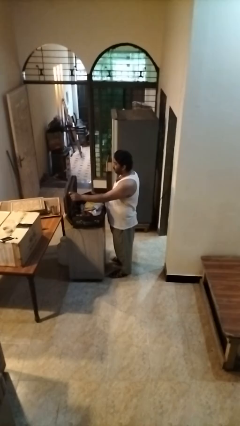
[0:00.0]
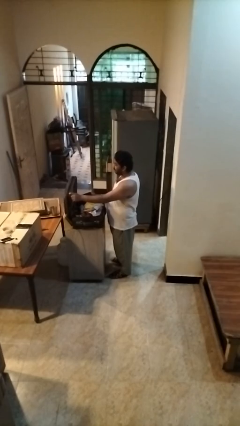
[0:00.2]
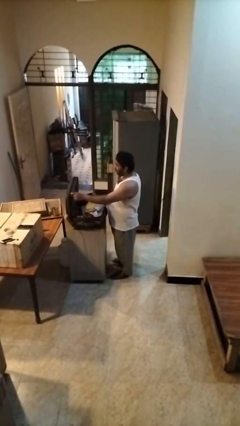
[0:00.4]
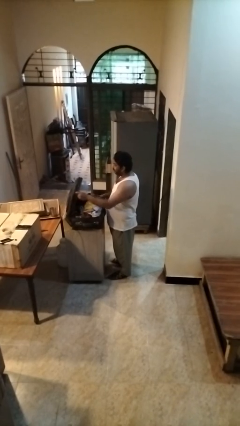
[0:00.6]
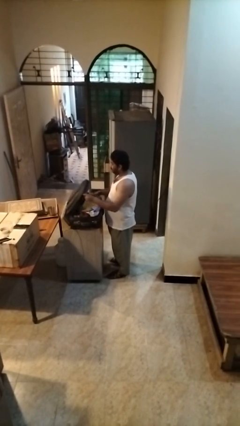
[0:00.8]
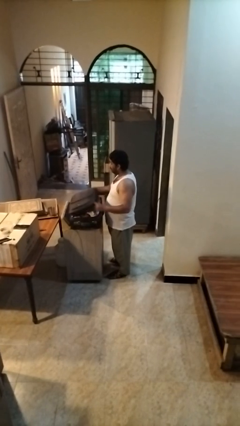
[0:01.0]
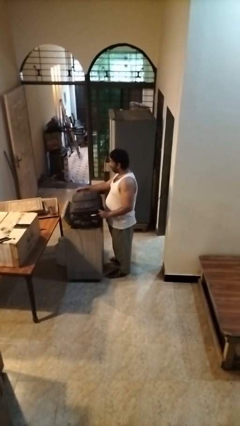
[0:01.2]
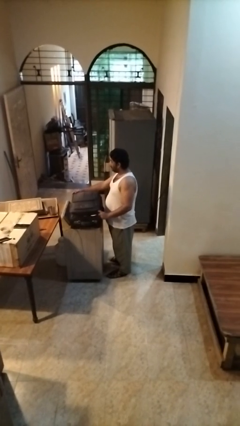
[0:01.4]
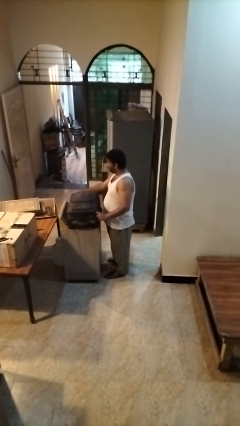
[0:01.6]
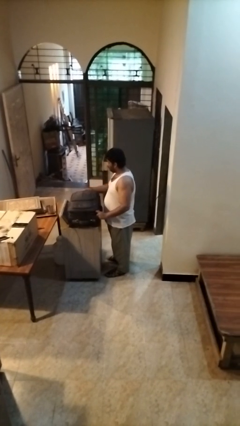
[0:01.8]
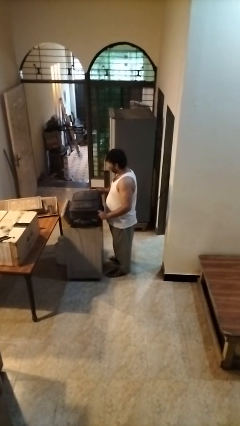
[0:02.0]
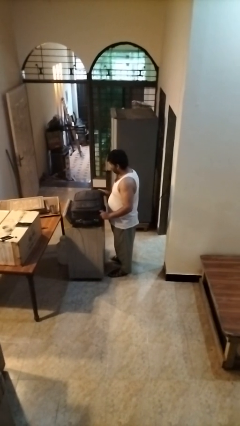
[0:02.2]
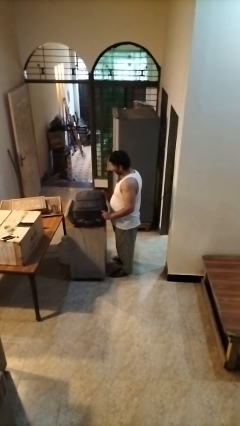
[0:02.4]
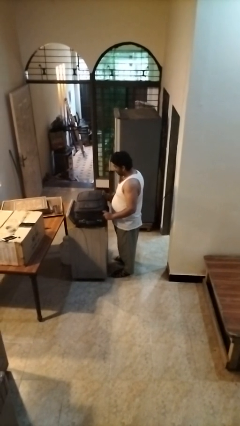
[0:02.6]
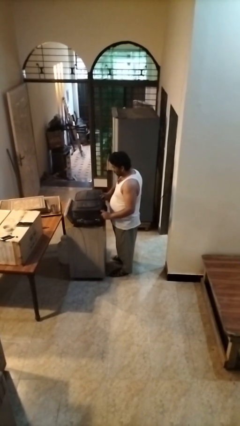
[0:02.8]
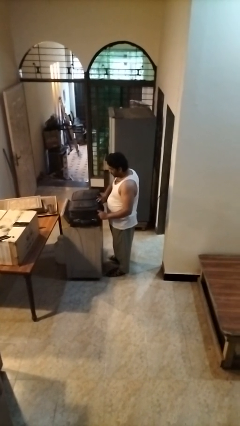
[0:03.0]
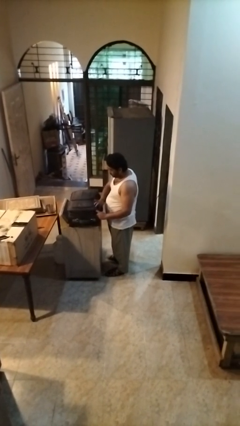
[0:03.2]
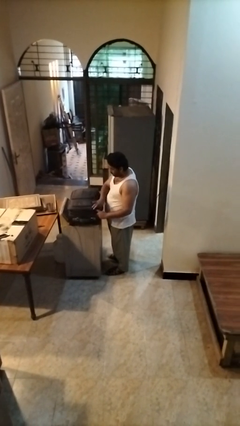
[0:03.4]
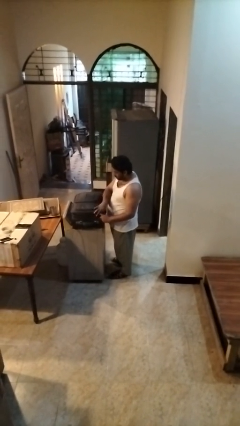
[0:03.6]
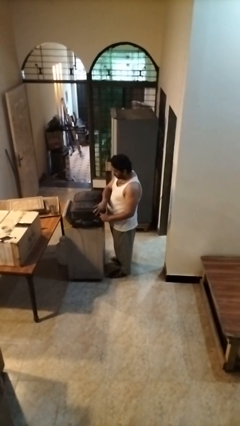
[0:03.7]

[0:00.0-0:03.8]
person closes suitcase

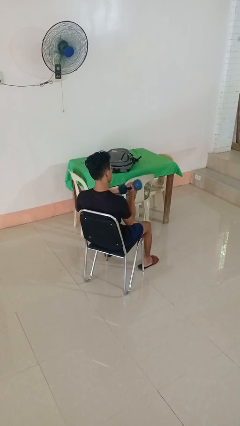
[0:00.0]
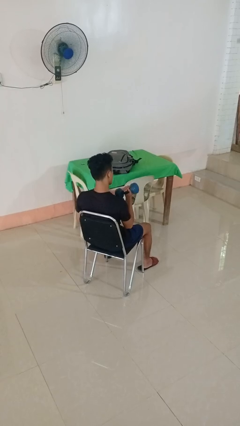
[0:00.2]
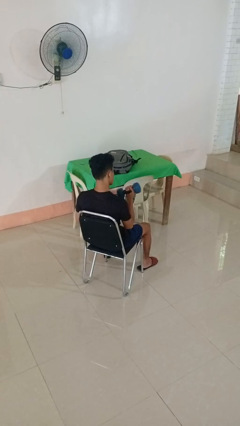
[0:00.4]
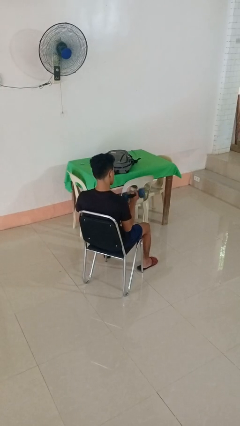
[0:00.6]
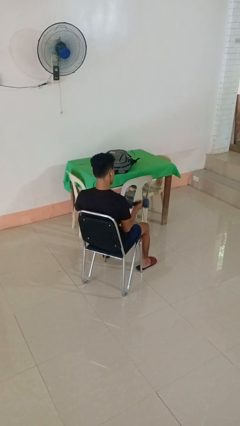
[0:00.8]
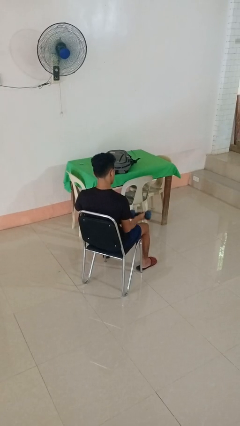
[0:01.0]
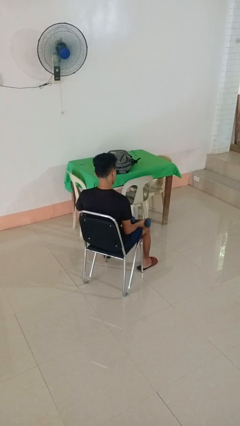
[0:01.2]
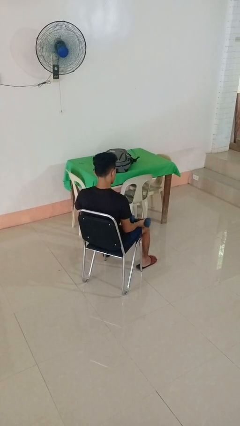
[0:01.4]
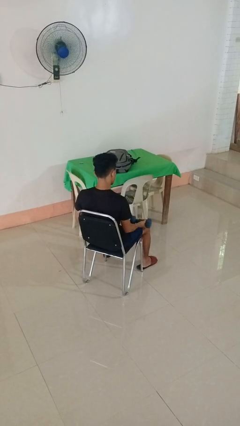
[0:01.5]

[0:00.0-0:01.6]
person lifts dumbbells

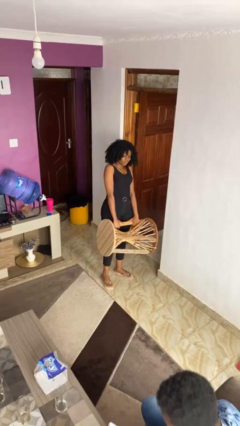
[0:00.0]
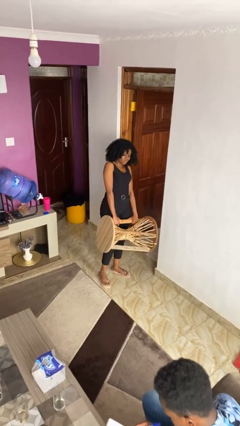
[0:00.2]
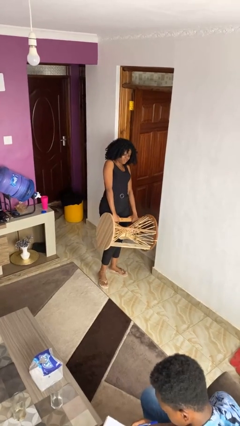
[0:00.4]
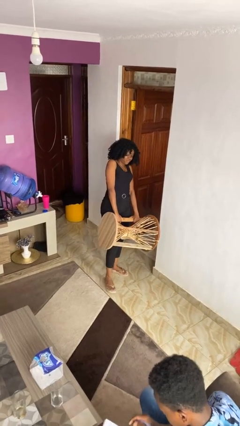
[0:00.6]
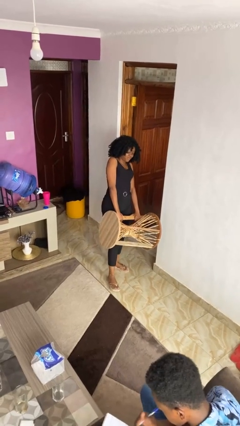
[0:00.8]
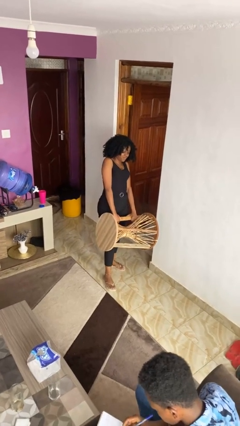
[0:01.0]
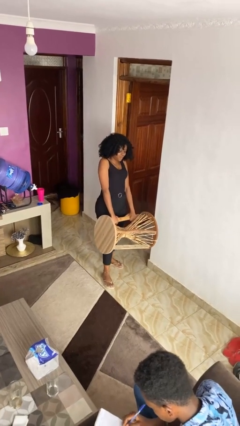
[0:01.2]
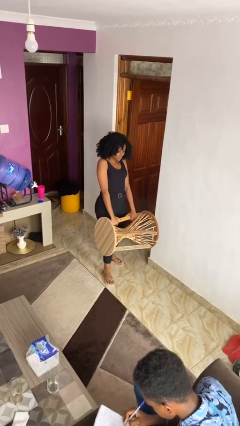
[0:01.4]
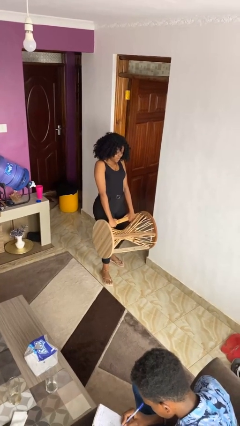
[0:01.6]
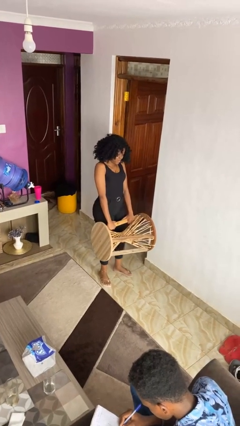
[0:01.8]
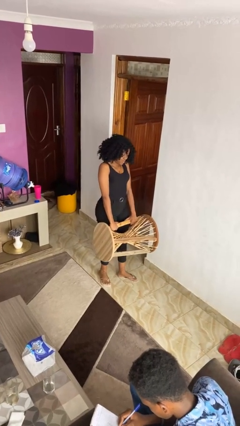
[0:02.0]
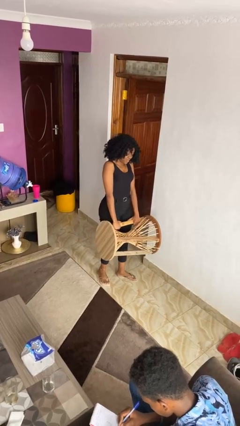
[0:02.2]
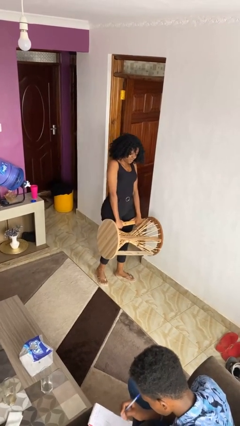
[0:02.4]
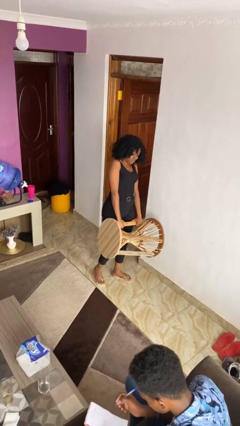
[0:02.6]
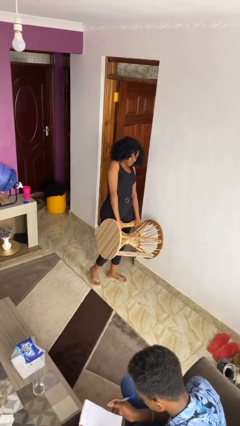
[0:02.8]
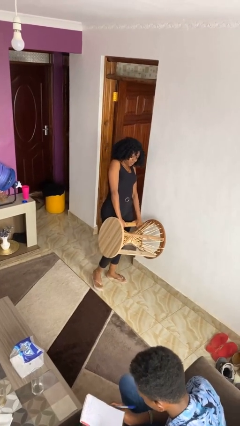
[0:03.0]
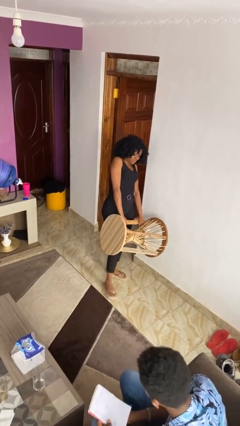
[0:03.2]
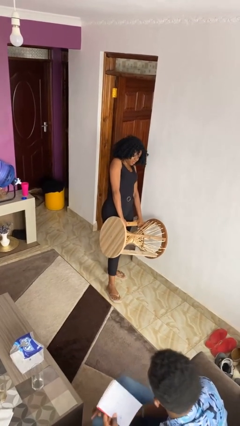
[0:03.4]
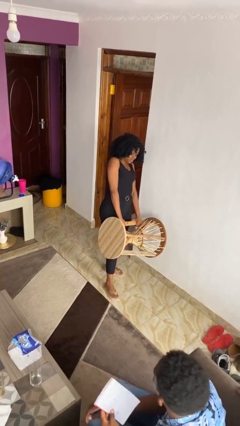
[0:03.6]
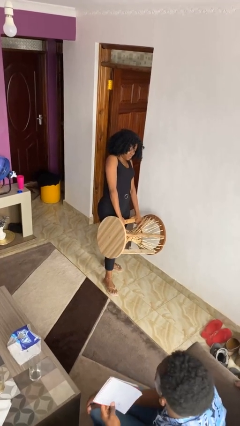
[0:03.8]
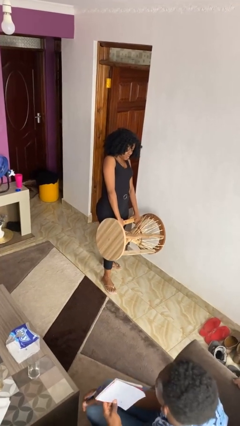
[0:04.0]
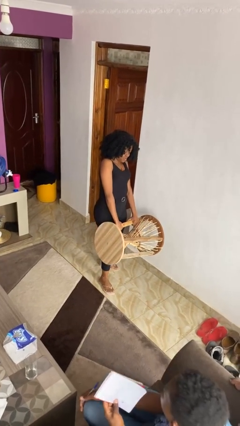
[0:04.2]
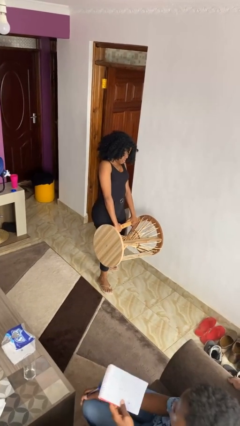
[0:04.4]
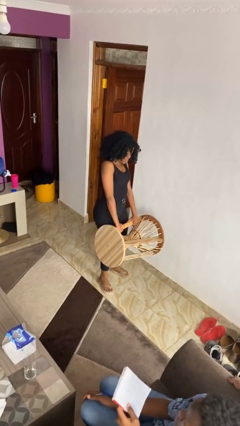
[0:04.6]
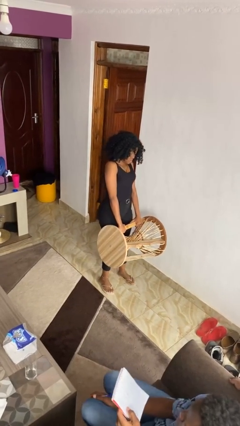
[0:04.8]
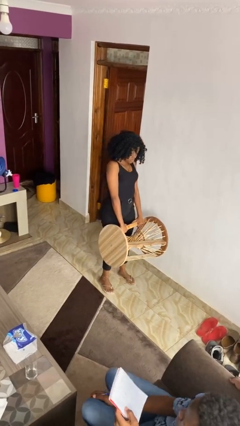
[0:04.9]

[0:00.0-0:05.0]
person carries furniture

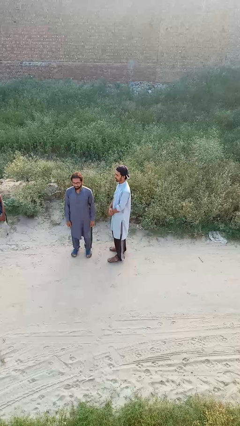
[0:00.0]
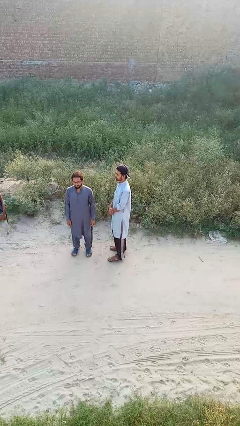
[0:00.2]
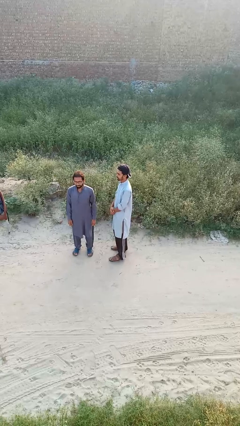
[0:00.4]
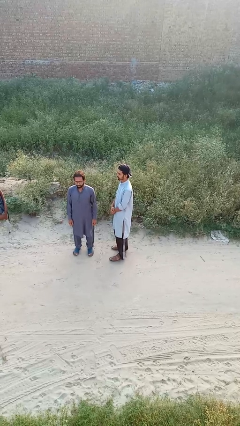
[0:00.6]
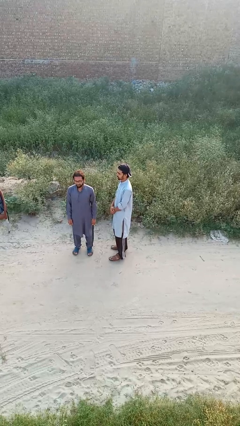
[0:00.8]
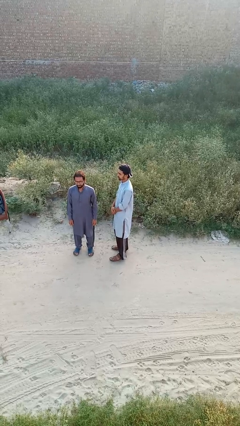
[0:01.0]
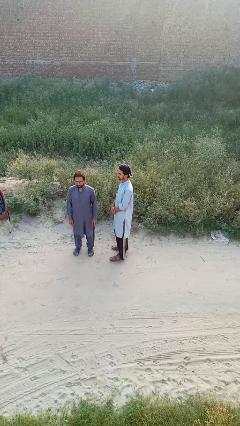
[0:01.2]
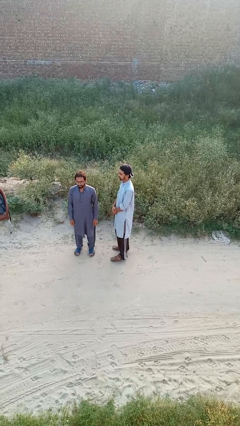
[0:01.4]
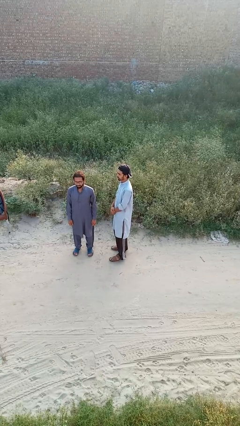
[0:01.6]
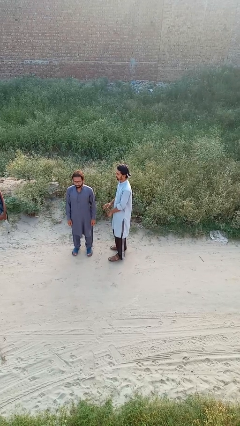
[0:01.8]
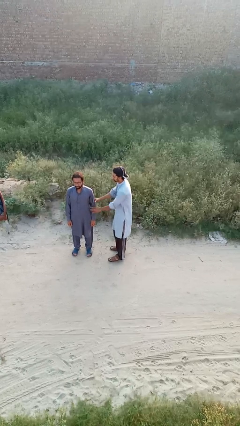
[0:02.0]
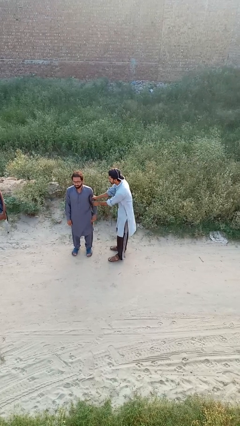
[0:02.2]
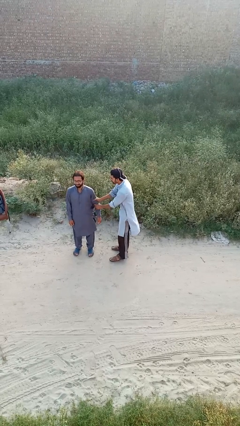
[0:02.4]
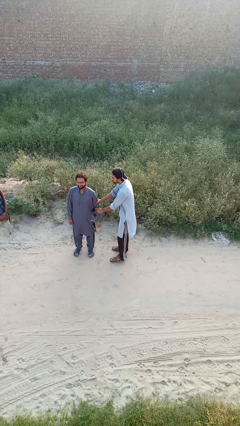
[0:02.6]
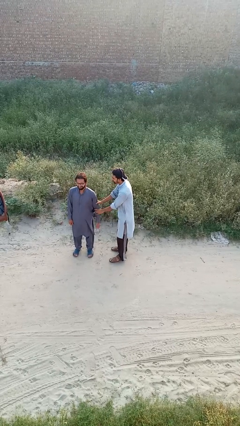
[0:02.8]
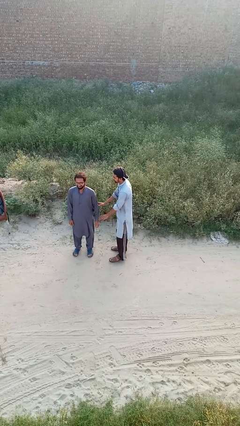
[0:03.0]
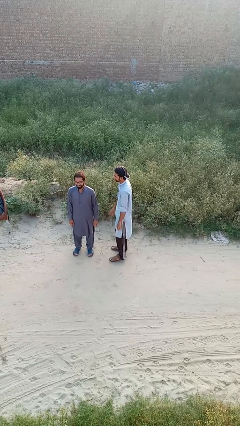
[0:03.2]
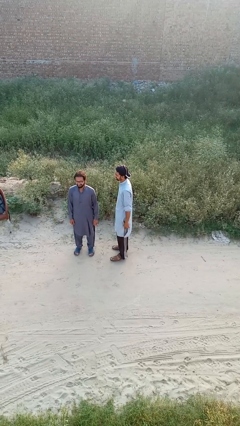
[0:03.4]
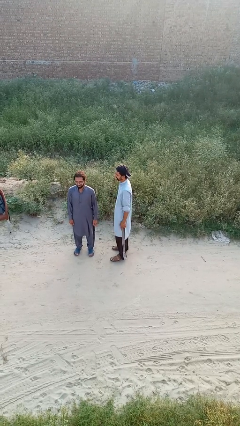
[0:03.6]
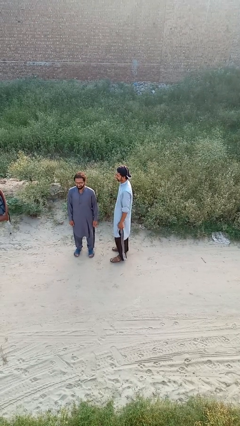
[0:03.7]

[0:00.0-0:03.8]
person grabs person by forearm

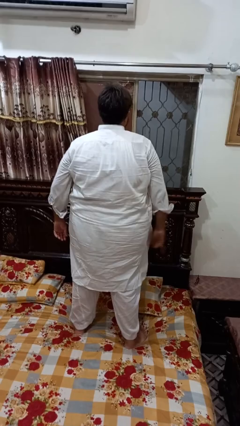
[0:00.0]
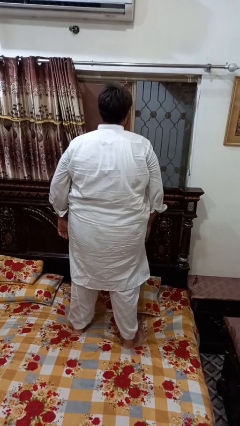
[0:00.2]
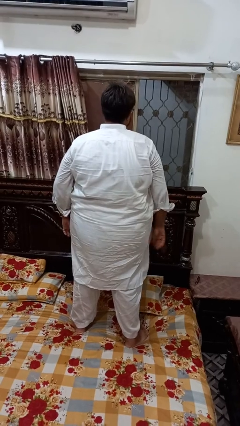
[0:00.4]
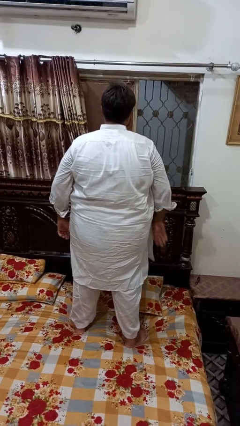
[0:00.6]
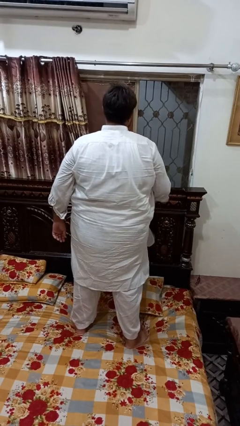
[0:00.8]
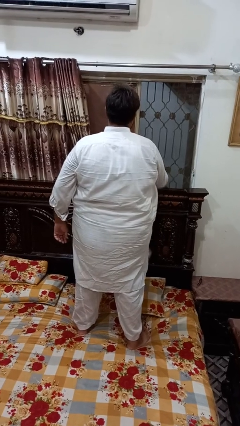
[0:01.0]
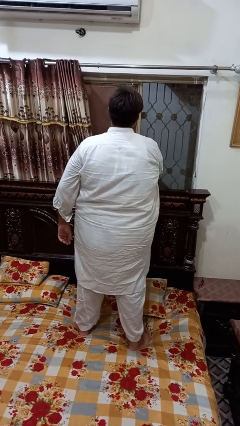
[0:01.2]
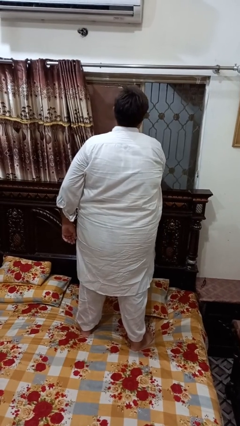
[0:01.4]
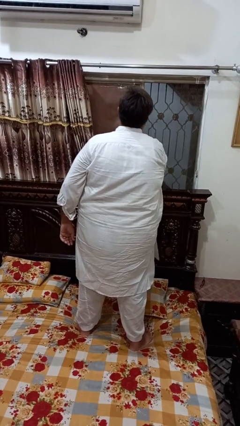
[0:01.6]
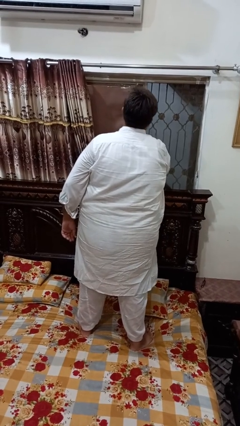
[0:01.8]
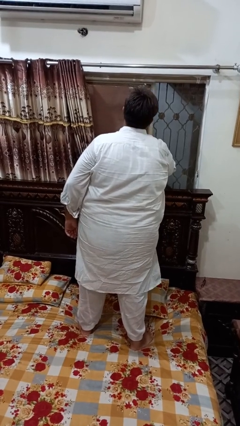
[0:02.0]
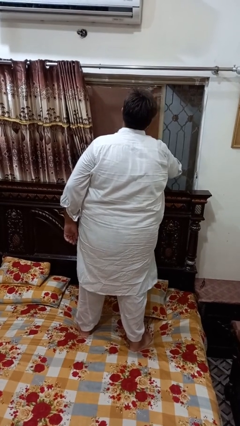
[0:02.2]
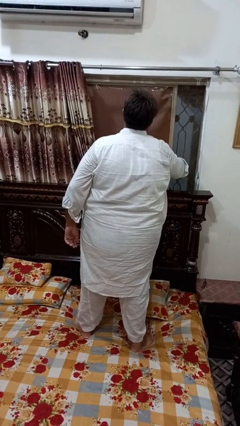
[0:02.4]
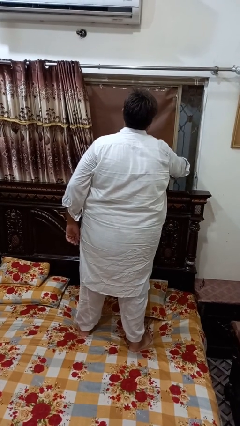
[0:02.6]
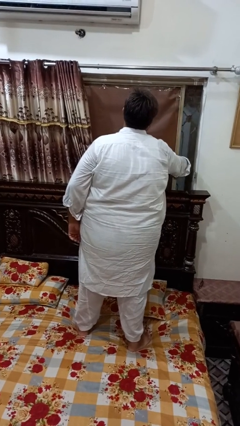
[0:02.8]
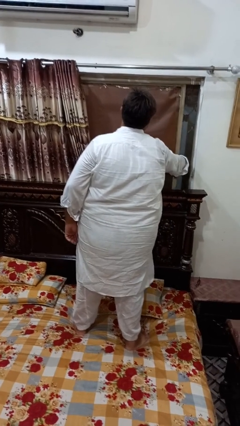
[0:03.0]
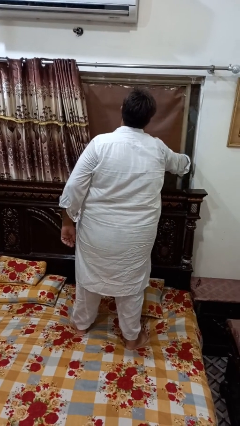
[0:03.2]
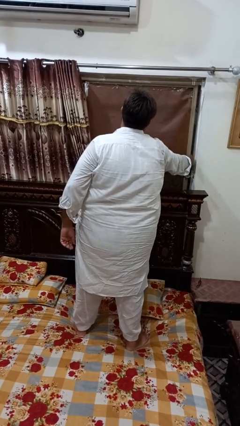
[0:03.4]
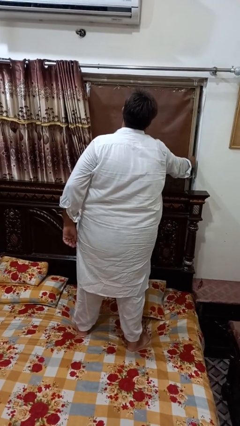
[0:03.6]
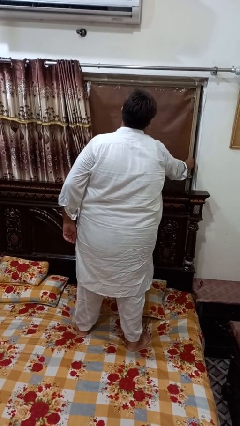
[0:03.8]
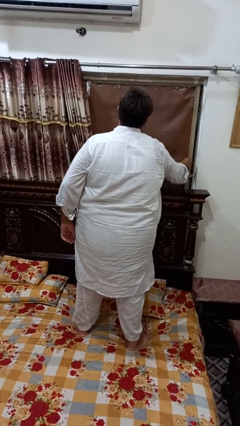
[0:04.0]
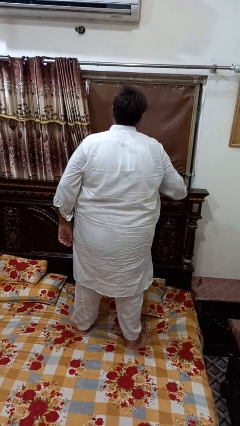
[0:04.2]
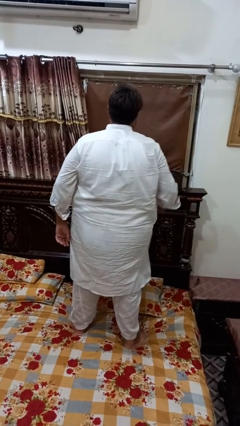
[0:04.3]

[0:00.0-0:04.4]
person closes home window
